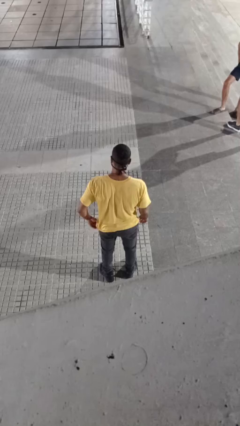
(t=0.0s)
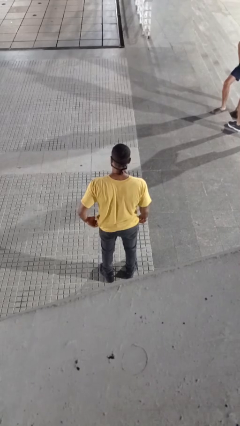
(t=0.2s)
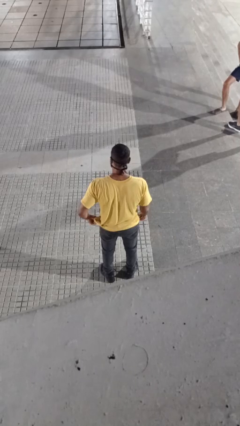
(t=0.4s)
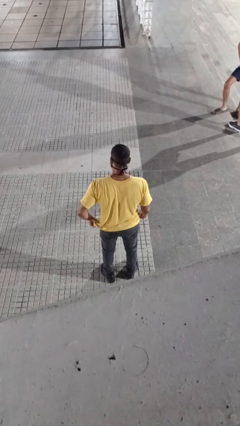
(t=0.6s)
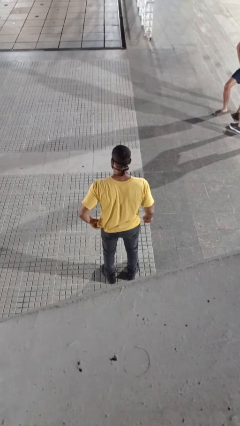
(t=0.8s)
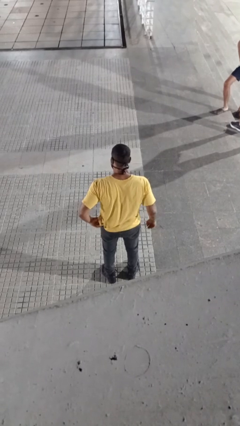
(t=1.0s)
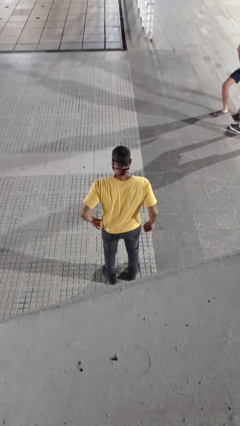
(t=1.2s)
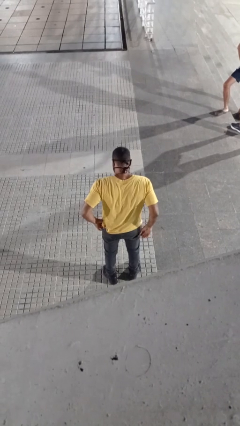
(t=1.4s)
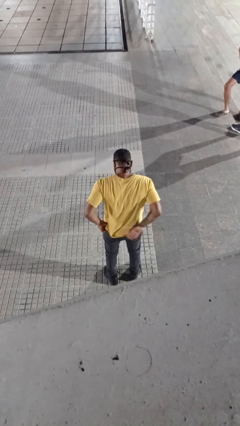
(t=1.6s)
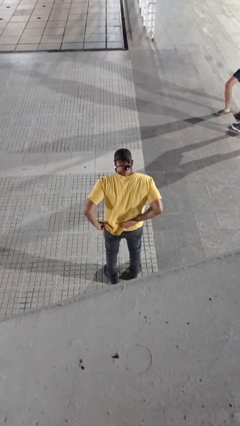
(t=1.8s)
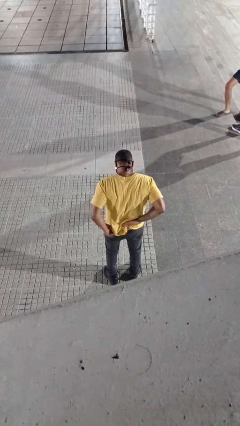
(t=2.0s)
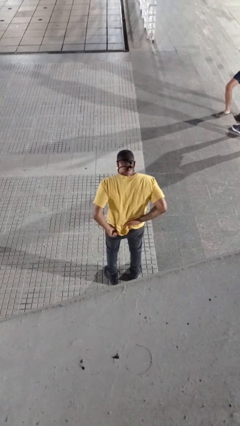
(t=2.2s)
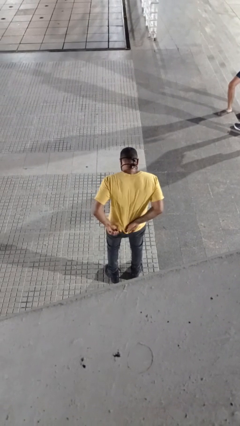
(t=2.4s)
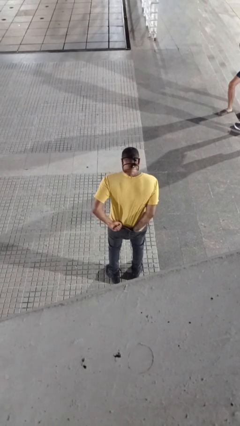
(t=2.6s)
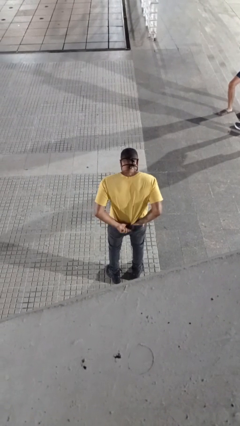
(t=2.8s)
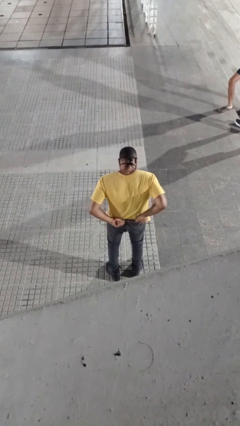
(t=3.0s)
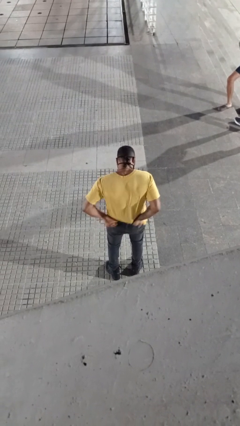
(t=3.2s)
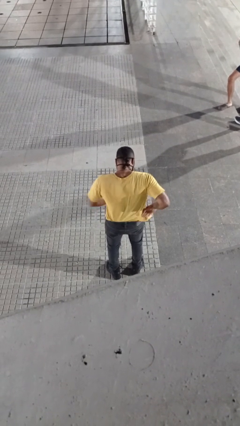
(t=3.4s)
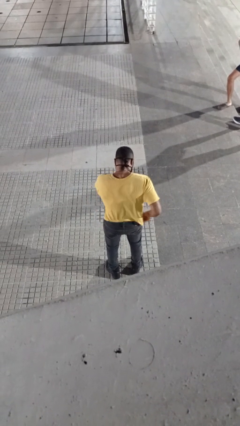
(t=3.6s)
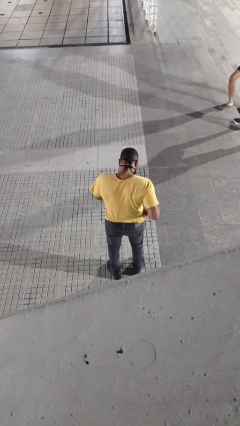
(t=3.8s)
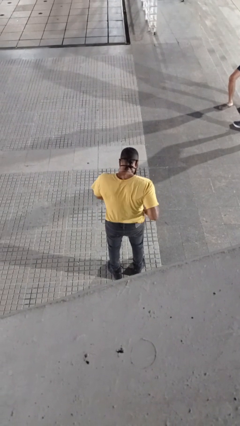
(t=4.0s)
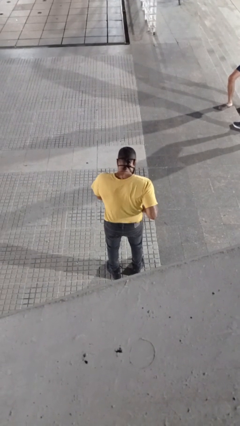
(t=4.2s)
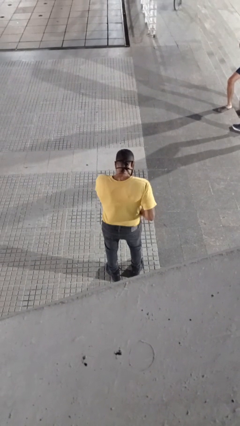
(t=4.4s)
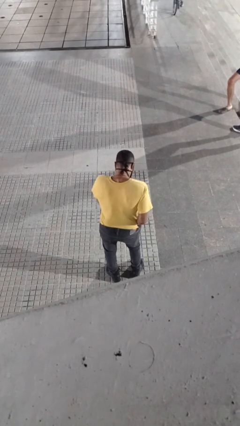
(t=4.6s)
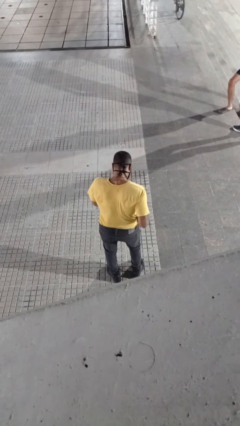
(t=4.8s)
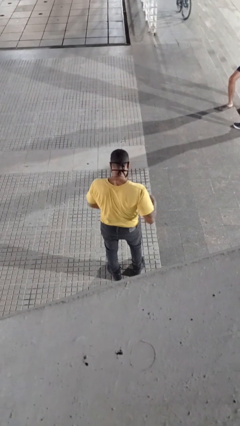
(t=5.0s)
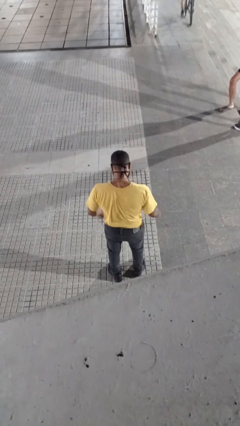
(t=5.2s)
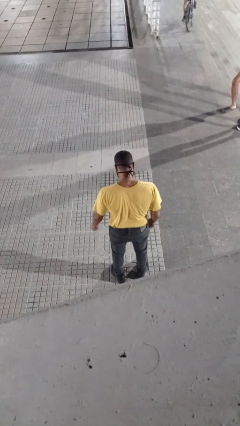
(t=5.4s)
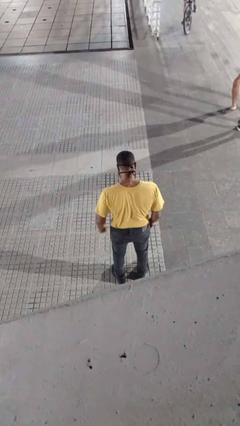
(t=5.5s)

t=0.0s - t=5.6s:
person tucks in shirt

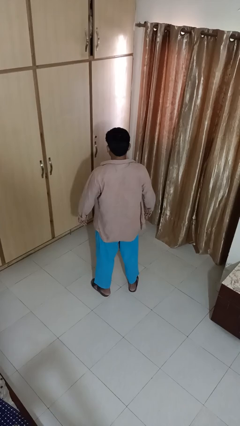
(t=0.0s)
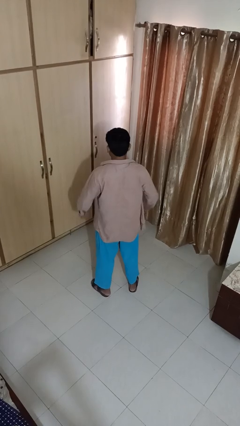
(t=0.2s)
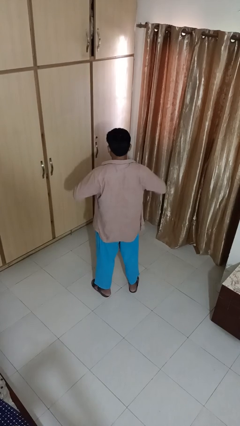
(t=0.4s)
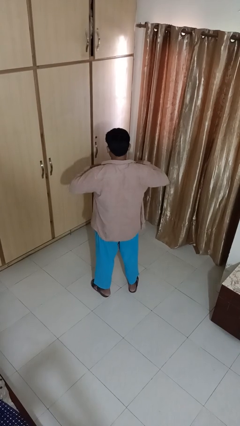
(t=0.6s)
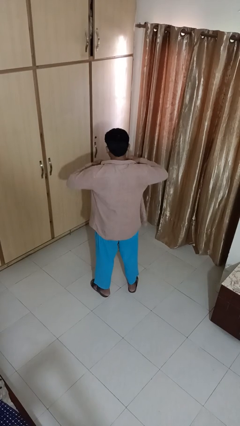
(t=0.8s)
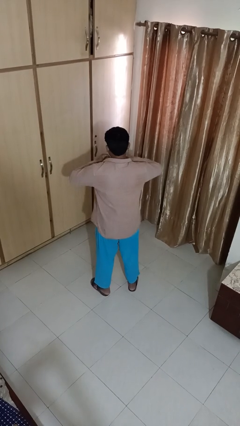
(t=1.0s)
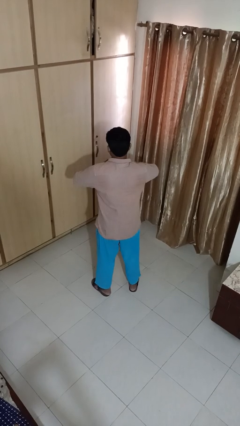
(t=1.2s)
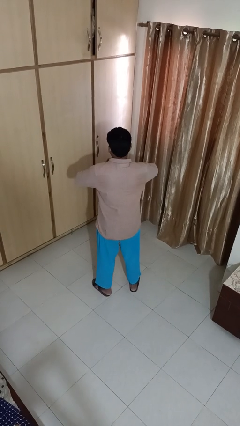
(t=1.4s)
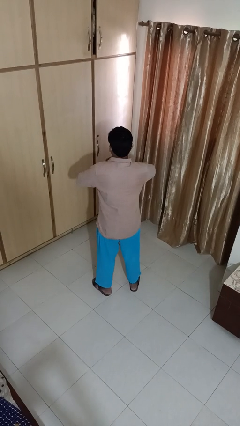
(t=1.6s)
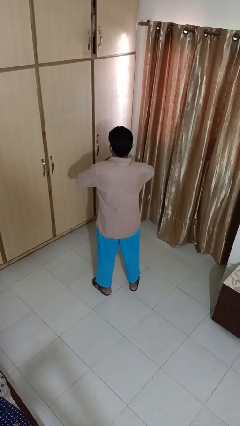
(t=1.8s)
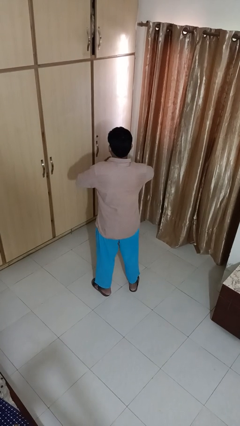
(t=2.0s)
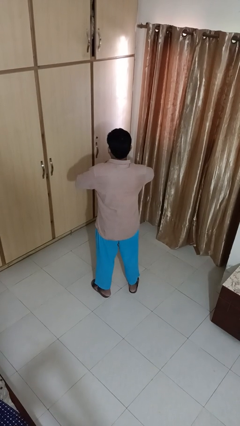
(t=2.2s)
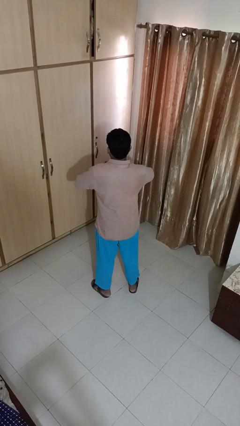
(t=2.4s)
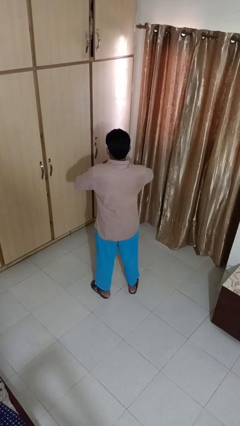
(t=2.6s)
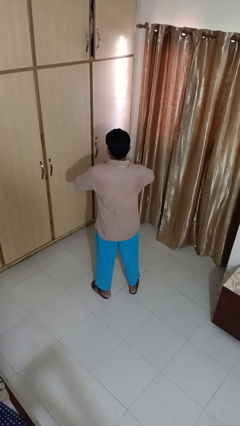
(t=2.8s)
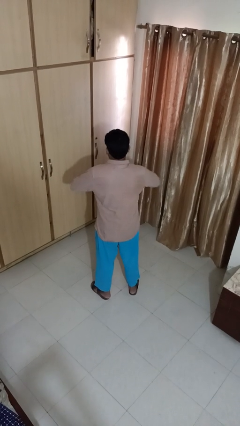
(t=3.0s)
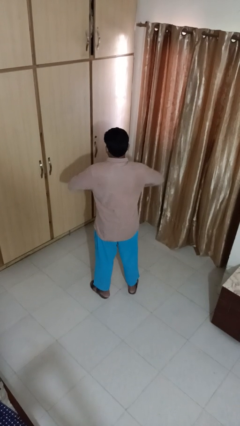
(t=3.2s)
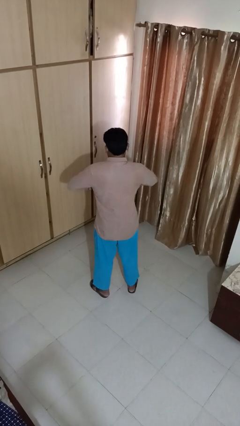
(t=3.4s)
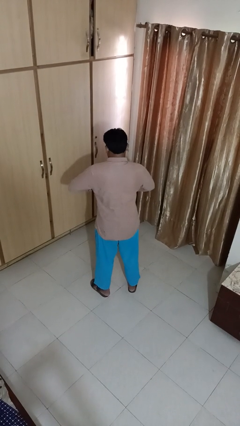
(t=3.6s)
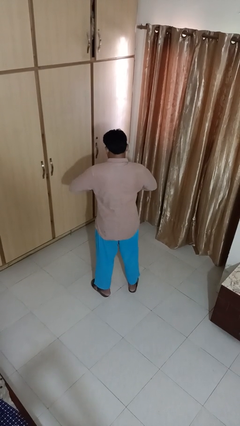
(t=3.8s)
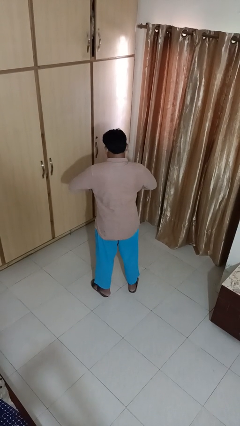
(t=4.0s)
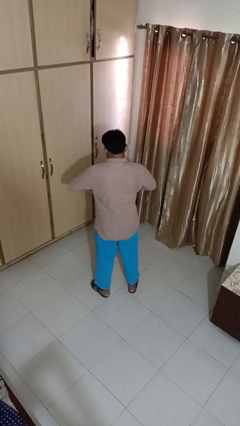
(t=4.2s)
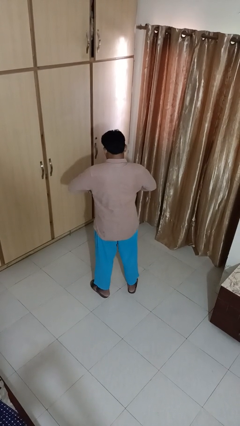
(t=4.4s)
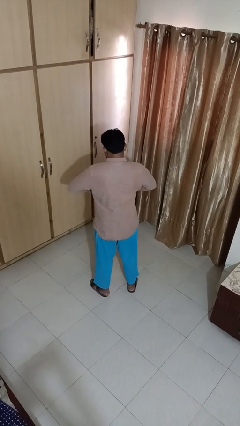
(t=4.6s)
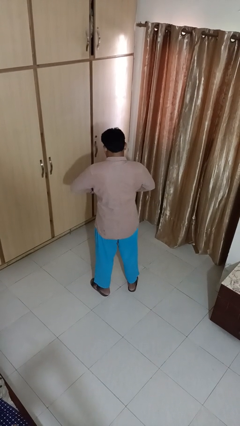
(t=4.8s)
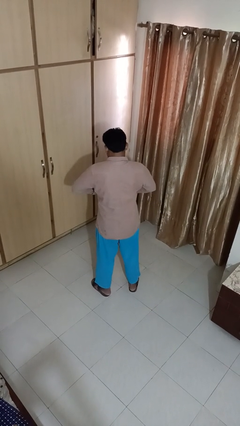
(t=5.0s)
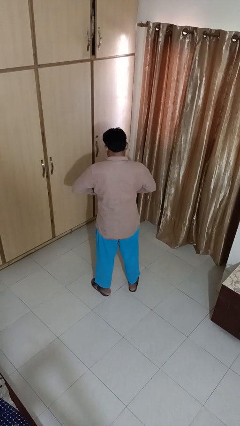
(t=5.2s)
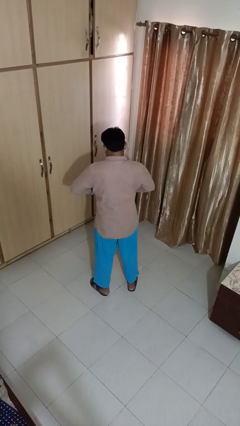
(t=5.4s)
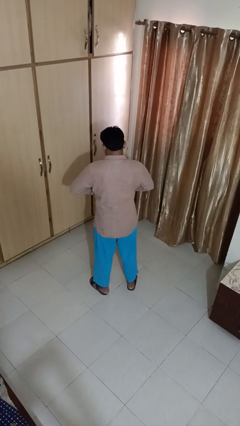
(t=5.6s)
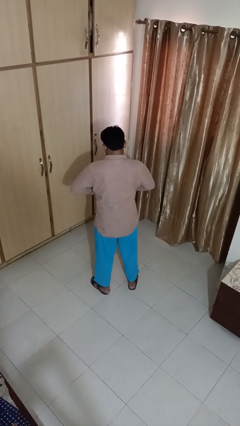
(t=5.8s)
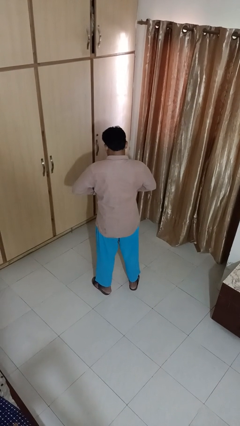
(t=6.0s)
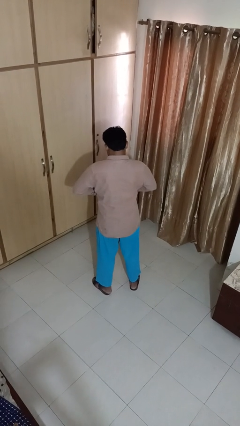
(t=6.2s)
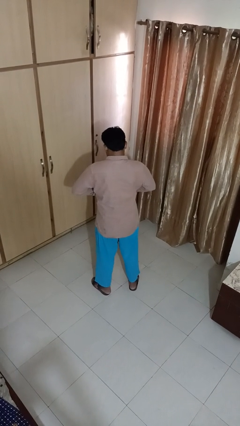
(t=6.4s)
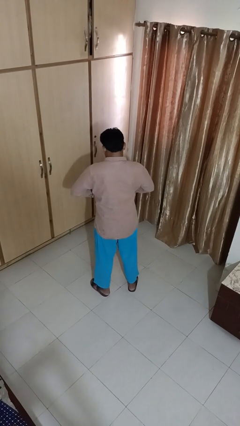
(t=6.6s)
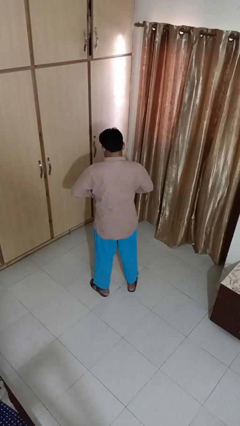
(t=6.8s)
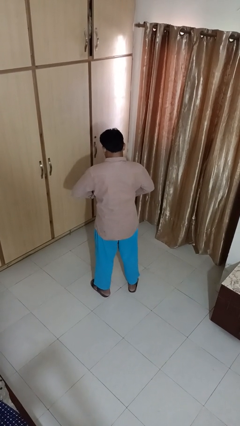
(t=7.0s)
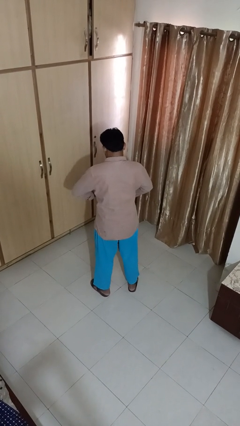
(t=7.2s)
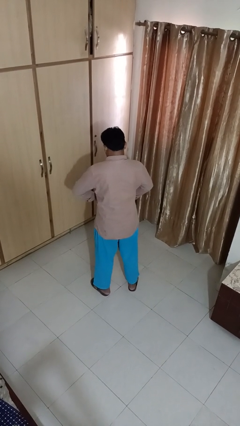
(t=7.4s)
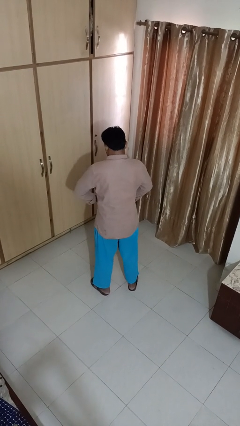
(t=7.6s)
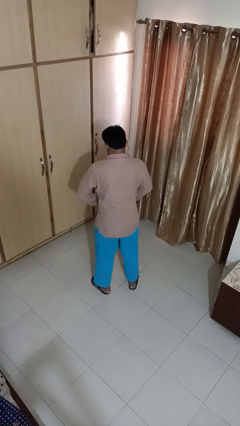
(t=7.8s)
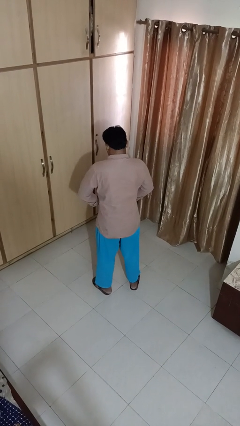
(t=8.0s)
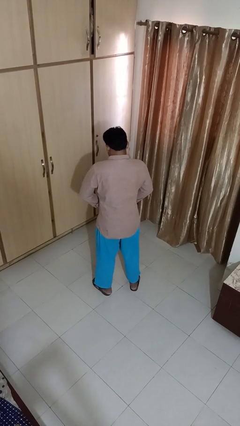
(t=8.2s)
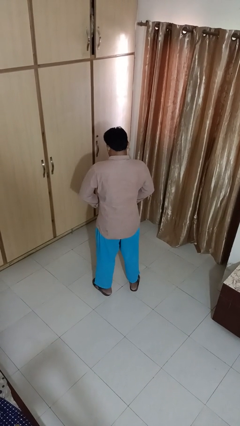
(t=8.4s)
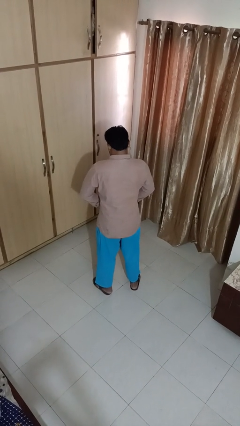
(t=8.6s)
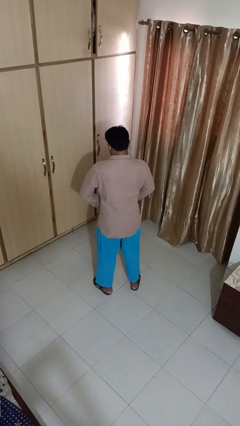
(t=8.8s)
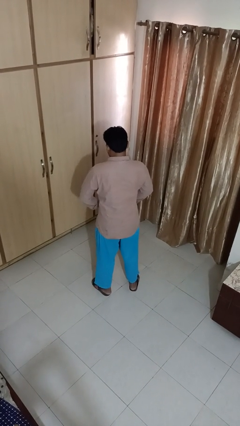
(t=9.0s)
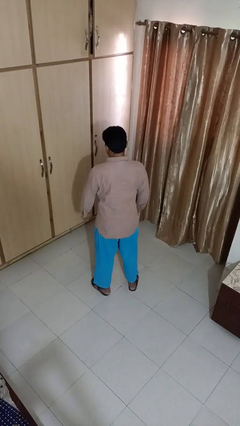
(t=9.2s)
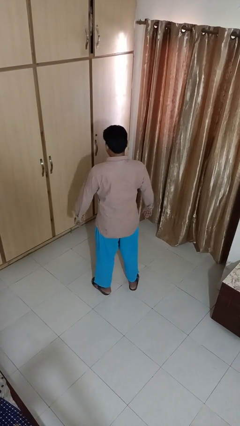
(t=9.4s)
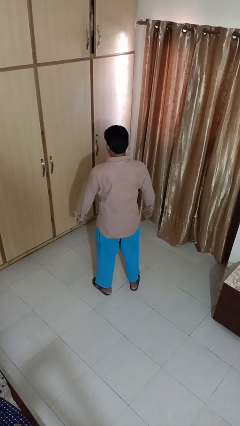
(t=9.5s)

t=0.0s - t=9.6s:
person buttons shirt

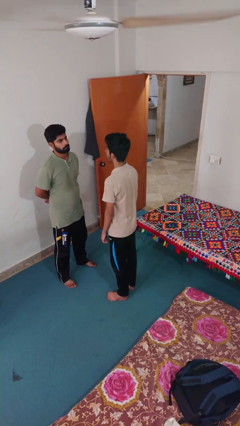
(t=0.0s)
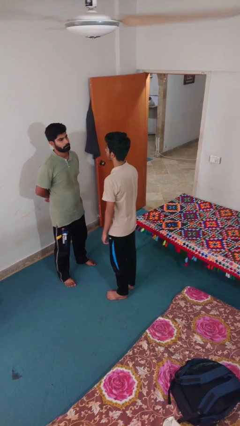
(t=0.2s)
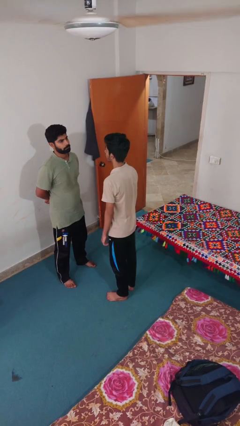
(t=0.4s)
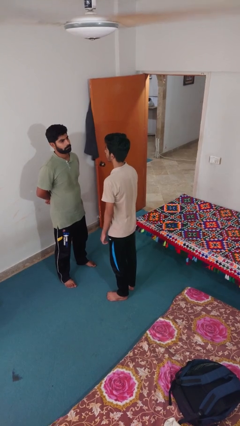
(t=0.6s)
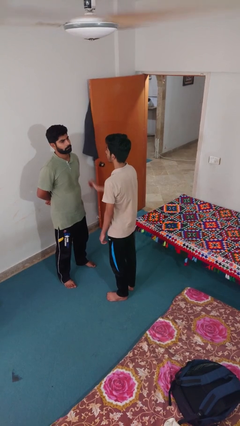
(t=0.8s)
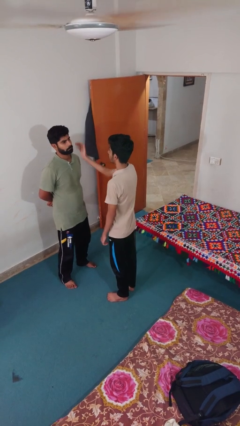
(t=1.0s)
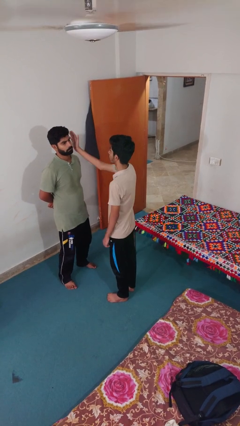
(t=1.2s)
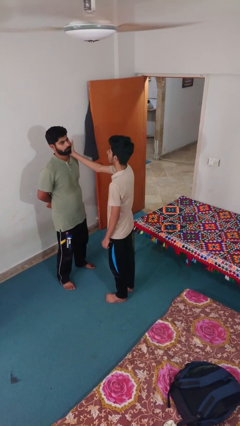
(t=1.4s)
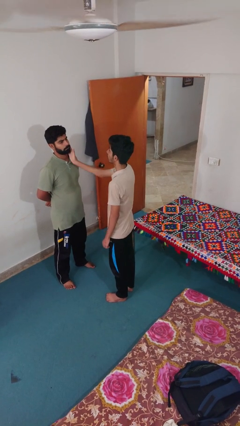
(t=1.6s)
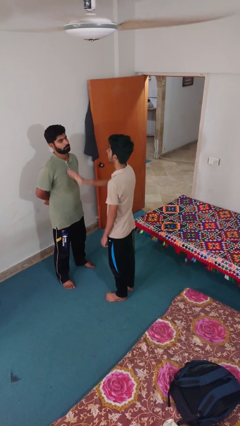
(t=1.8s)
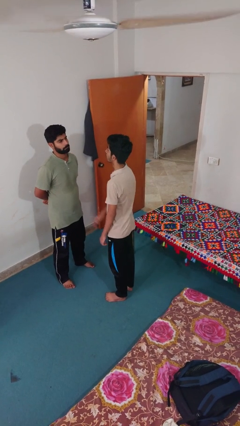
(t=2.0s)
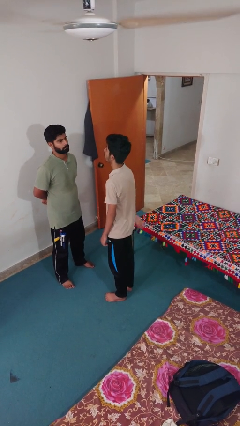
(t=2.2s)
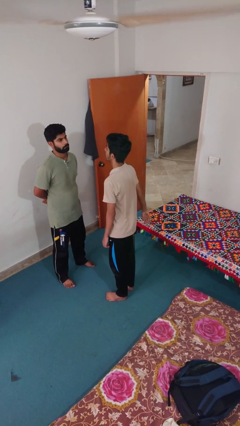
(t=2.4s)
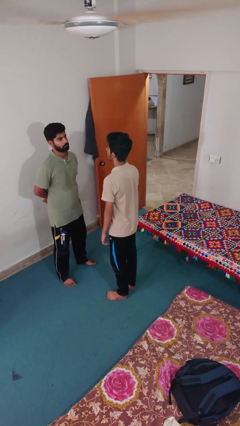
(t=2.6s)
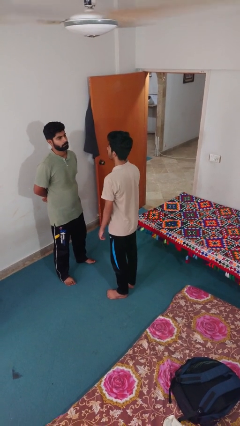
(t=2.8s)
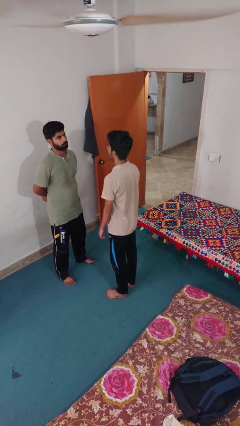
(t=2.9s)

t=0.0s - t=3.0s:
person touches face of person
